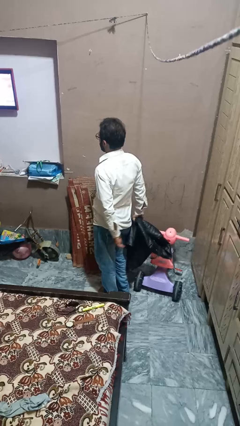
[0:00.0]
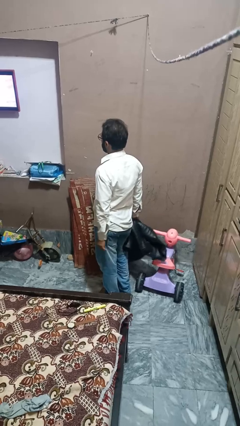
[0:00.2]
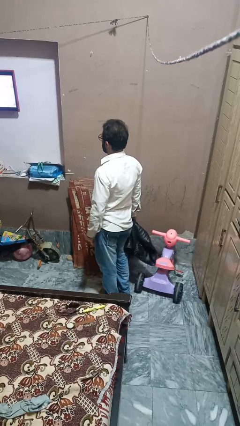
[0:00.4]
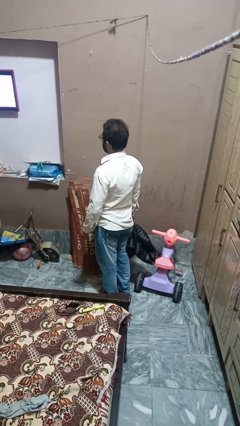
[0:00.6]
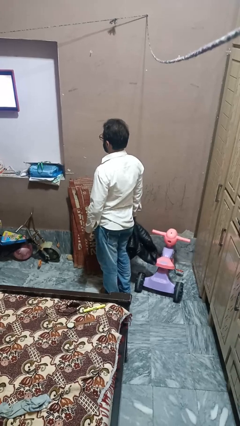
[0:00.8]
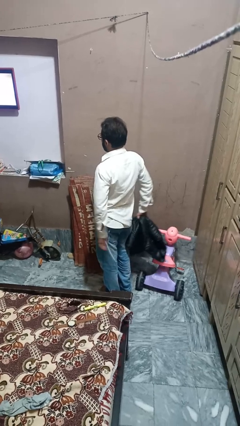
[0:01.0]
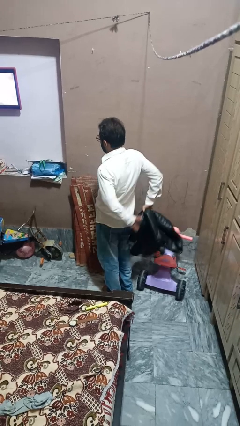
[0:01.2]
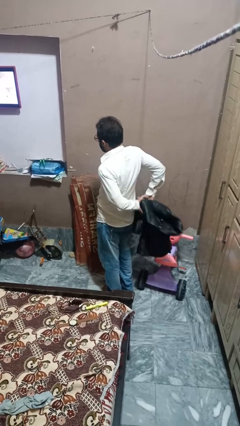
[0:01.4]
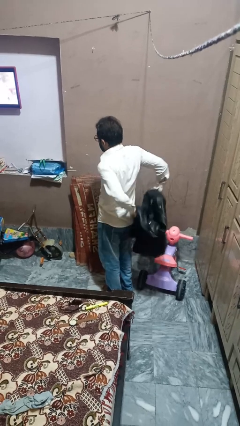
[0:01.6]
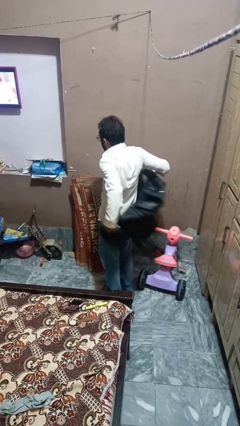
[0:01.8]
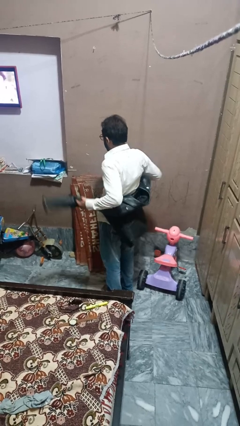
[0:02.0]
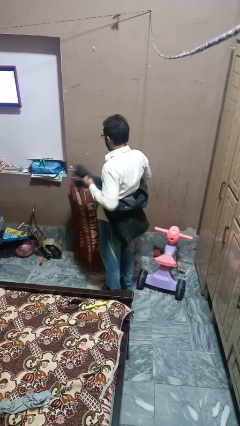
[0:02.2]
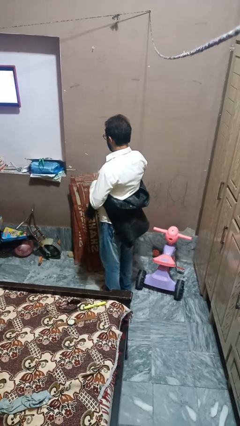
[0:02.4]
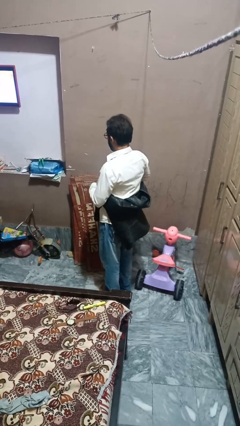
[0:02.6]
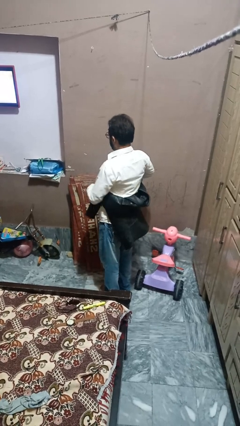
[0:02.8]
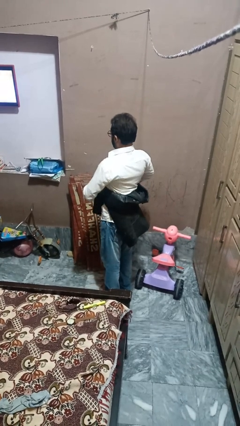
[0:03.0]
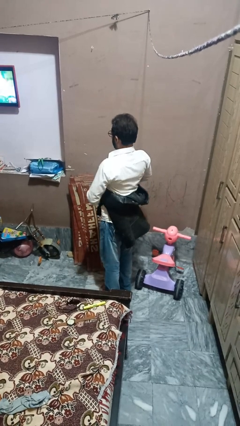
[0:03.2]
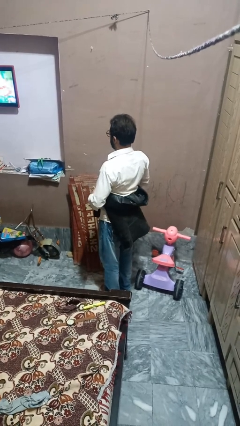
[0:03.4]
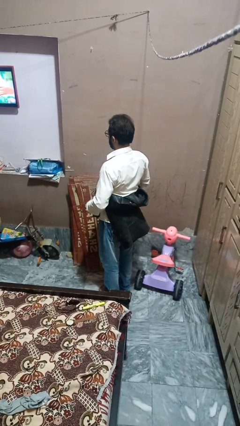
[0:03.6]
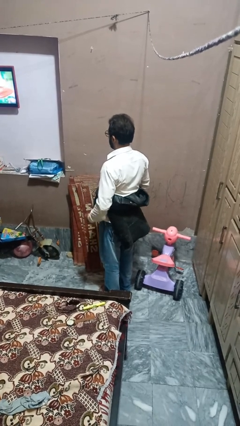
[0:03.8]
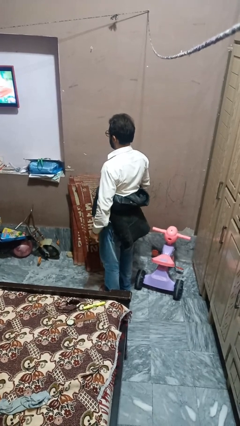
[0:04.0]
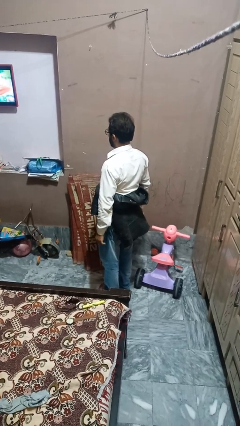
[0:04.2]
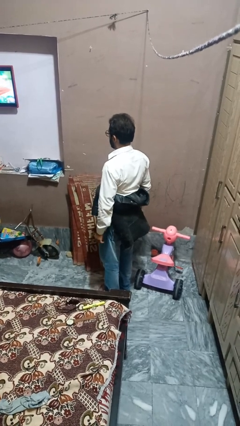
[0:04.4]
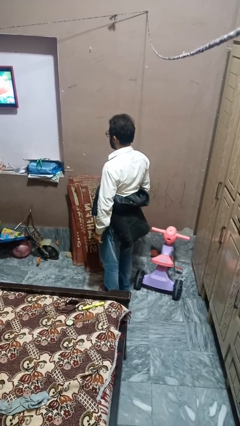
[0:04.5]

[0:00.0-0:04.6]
person ties jacket around waist

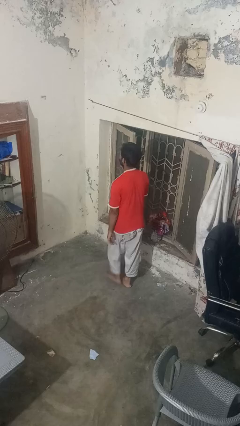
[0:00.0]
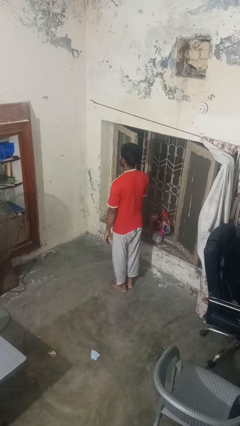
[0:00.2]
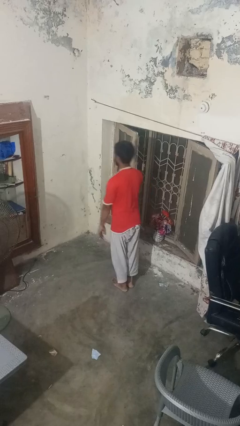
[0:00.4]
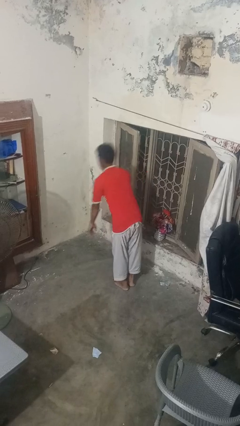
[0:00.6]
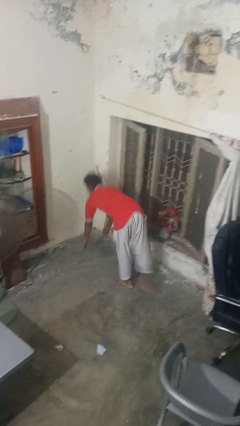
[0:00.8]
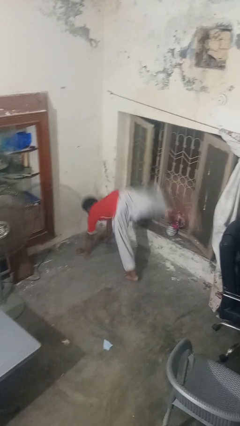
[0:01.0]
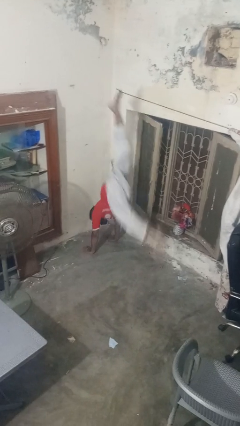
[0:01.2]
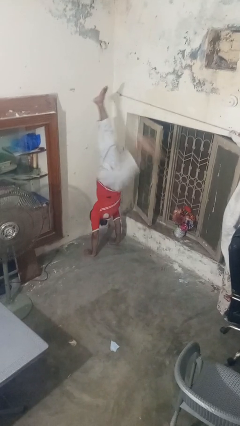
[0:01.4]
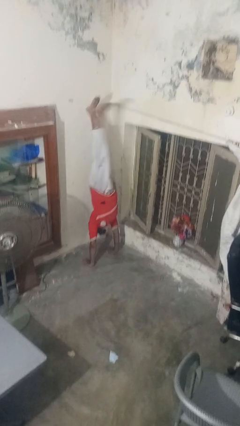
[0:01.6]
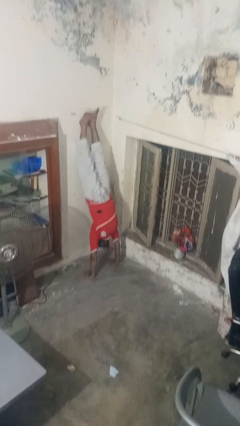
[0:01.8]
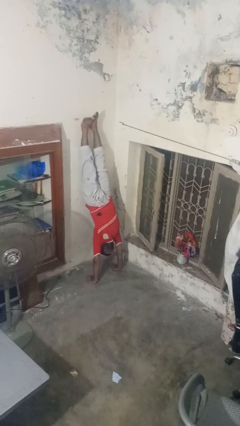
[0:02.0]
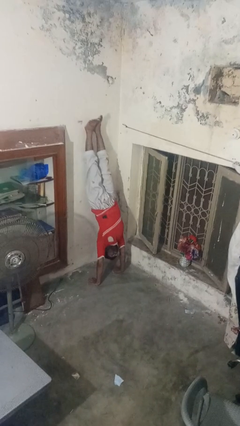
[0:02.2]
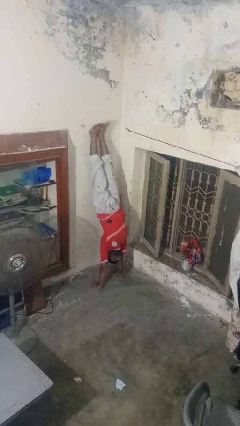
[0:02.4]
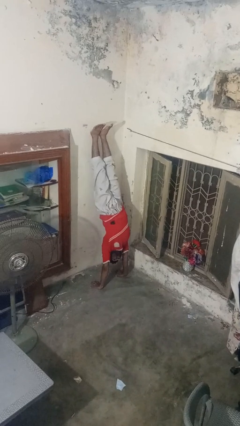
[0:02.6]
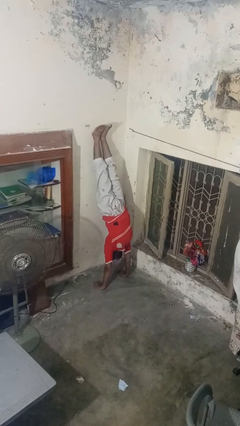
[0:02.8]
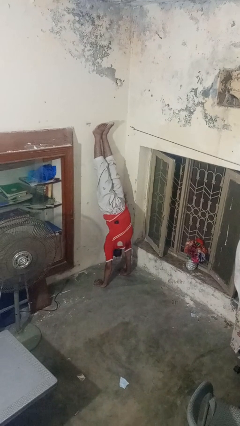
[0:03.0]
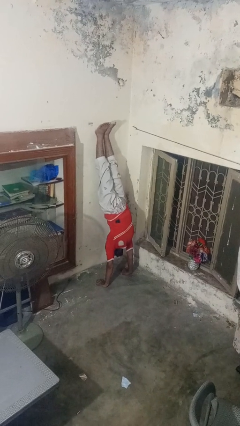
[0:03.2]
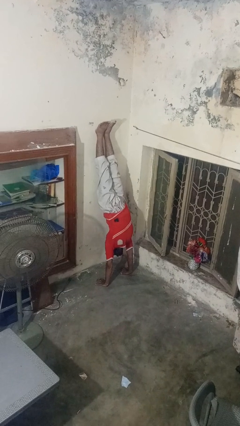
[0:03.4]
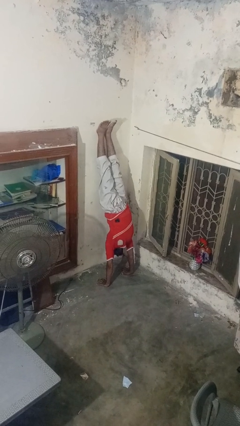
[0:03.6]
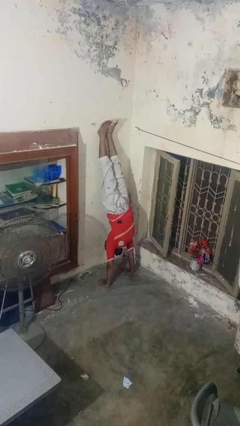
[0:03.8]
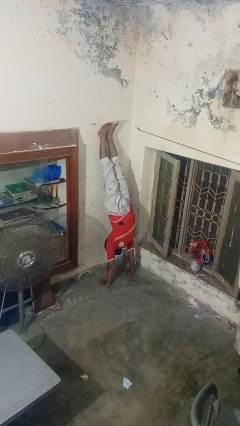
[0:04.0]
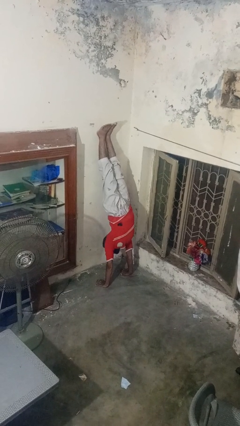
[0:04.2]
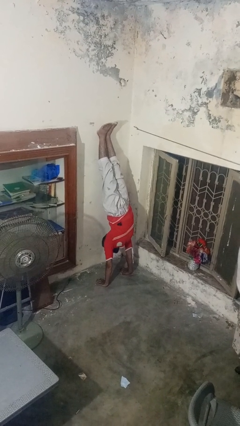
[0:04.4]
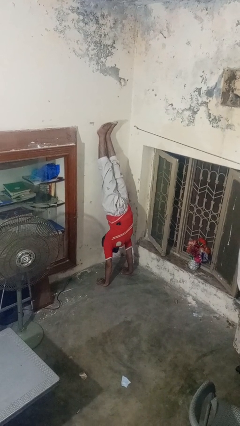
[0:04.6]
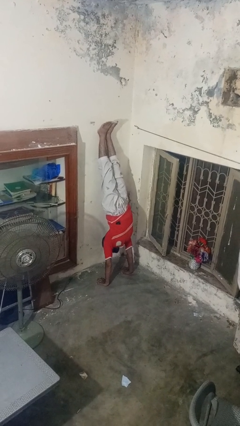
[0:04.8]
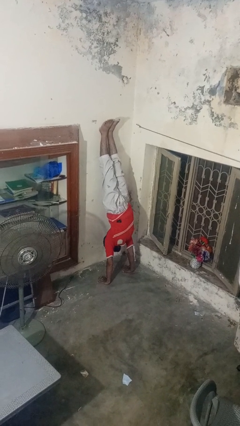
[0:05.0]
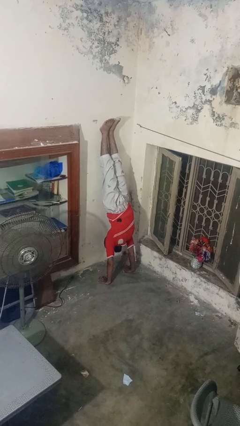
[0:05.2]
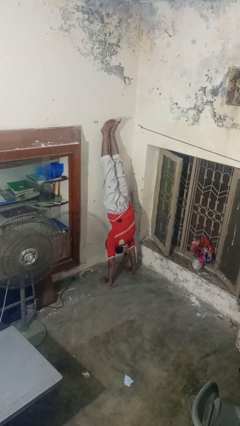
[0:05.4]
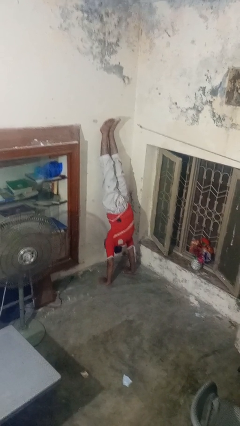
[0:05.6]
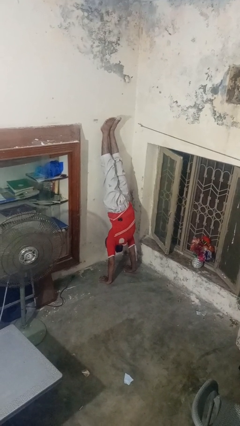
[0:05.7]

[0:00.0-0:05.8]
person handstand

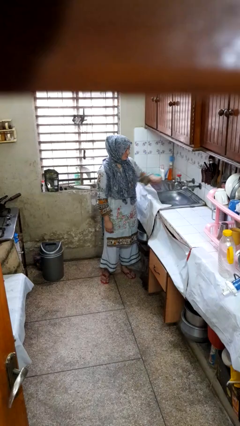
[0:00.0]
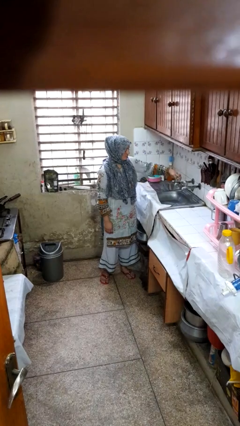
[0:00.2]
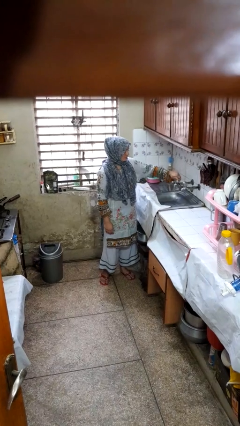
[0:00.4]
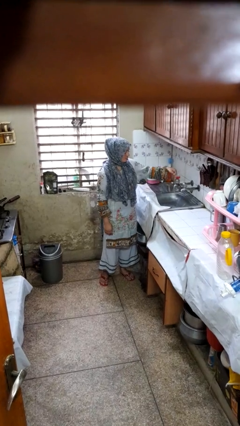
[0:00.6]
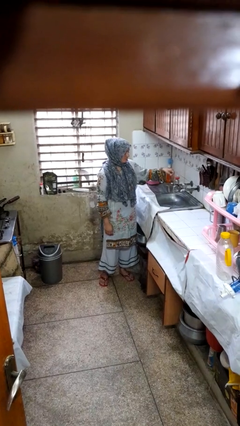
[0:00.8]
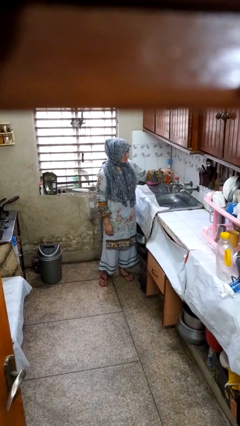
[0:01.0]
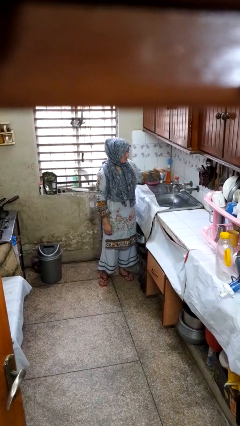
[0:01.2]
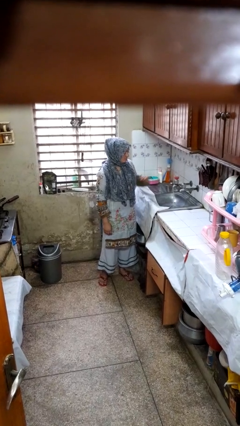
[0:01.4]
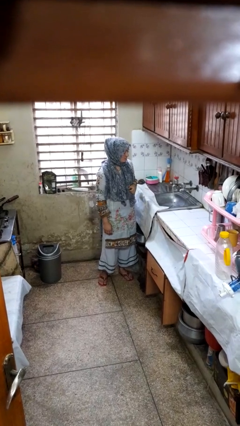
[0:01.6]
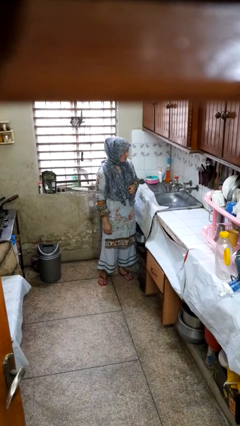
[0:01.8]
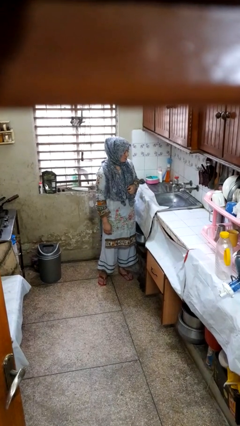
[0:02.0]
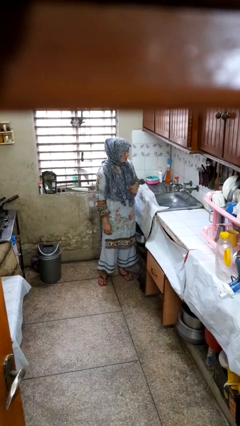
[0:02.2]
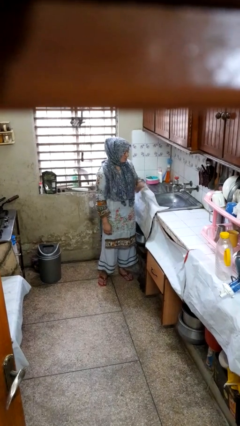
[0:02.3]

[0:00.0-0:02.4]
person turns on faucet

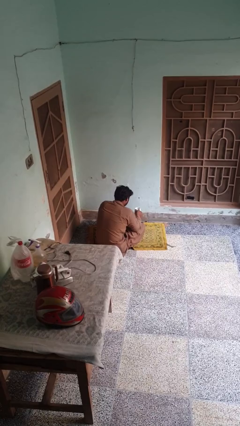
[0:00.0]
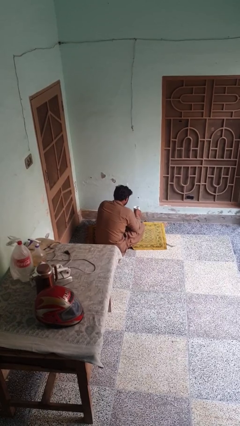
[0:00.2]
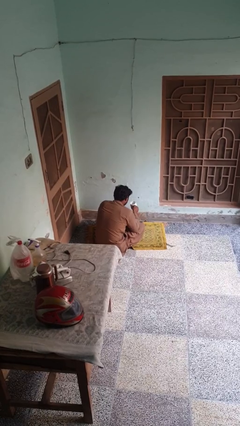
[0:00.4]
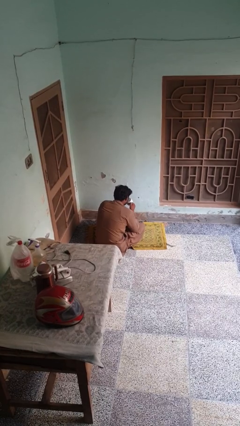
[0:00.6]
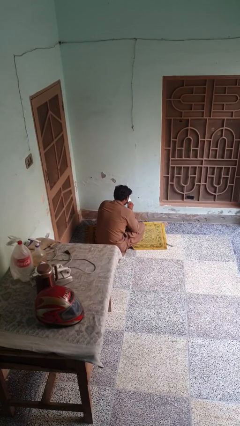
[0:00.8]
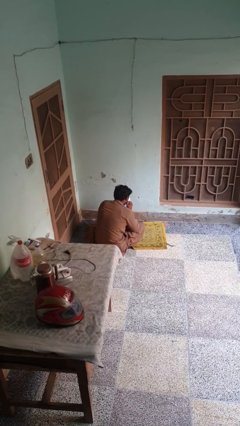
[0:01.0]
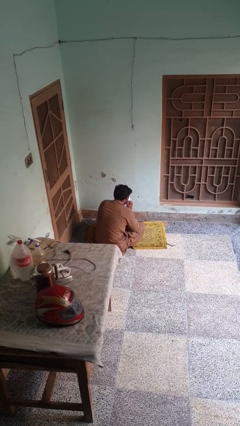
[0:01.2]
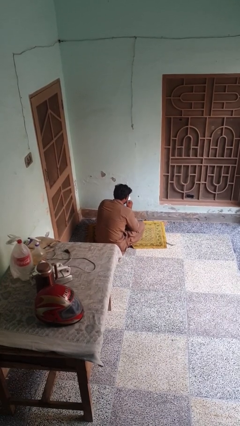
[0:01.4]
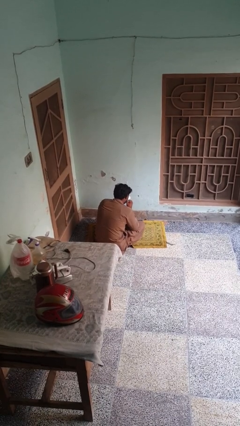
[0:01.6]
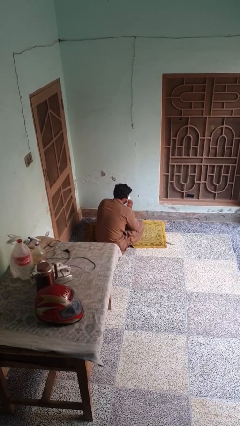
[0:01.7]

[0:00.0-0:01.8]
person drinks from mug

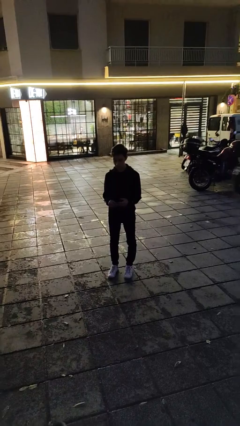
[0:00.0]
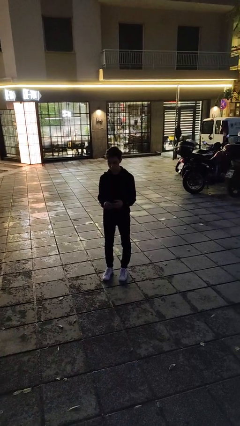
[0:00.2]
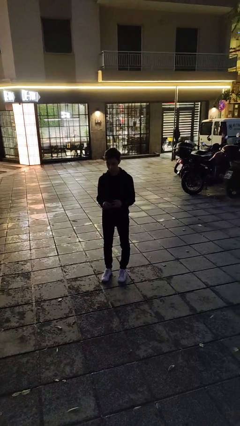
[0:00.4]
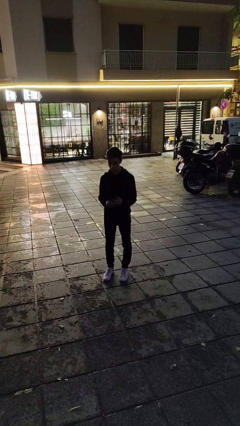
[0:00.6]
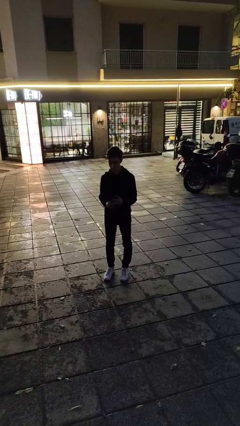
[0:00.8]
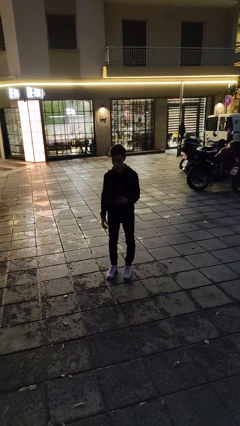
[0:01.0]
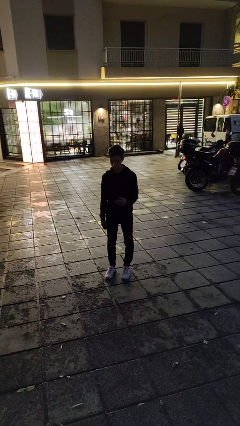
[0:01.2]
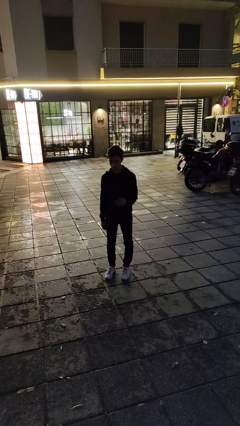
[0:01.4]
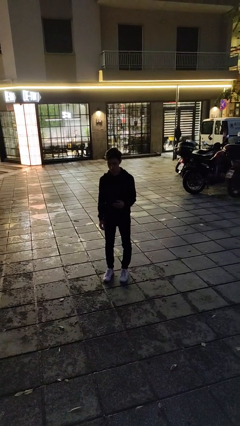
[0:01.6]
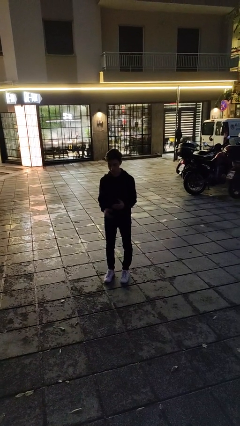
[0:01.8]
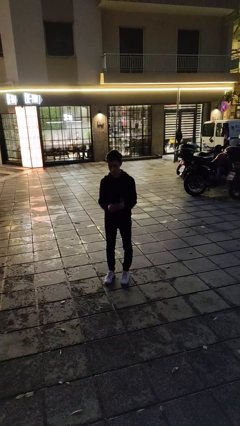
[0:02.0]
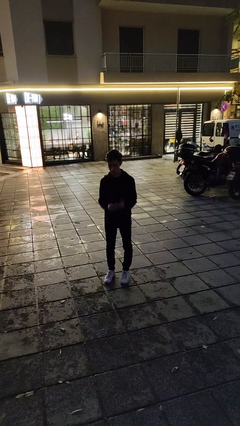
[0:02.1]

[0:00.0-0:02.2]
person puts on ring
